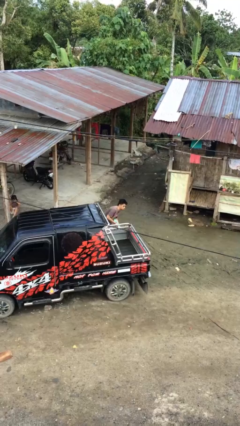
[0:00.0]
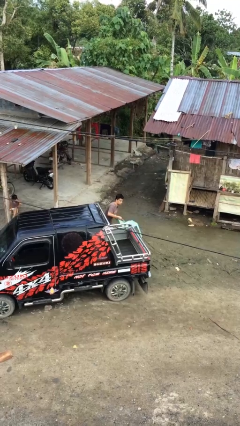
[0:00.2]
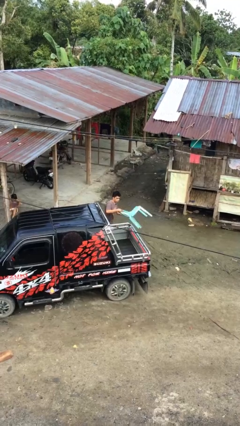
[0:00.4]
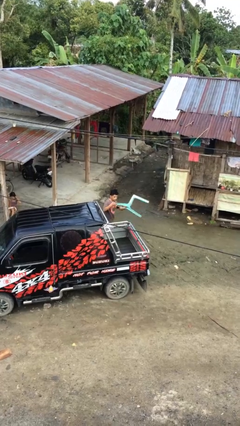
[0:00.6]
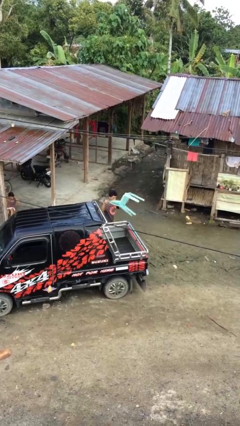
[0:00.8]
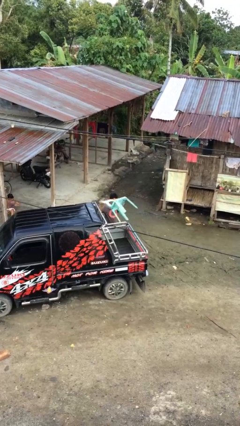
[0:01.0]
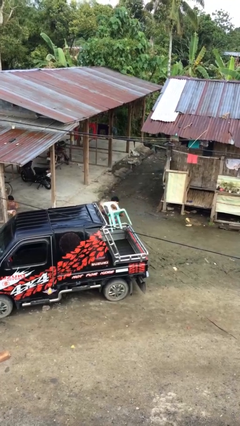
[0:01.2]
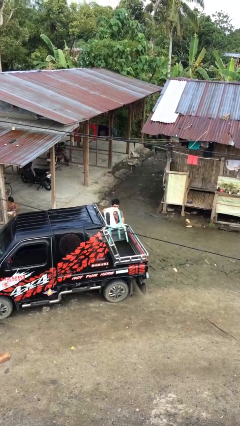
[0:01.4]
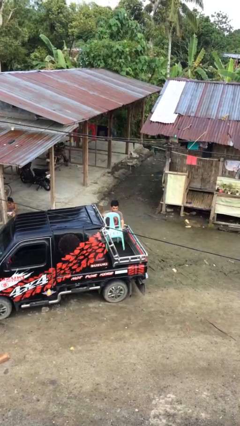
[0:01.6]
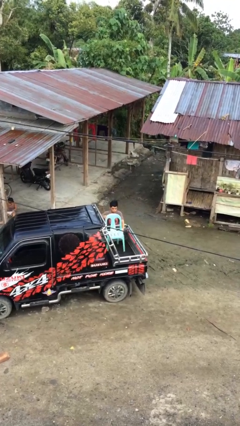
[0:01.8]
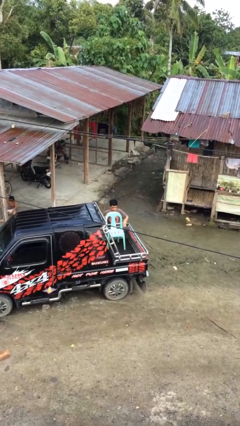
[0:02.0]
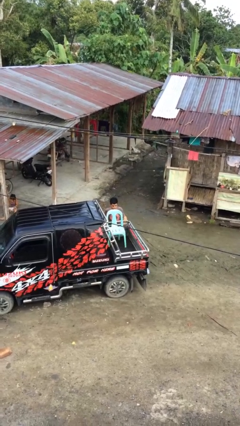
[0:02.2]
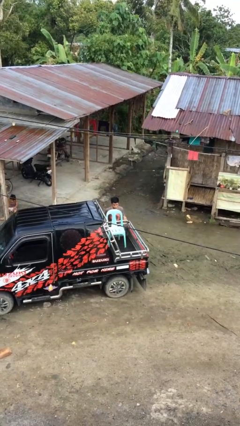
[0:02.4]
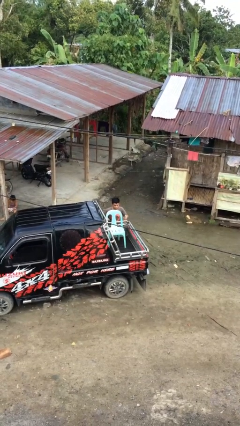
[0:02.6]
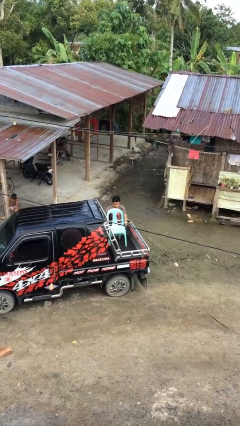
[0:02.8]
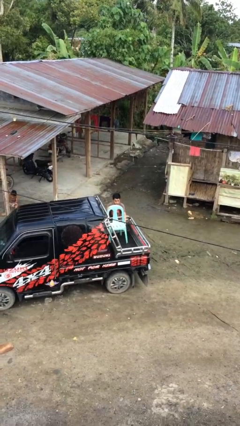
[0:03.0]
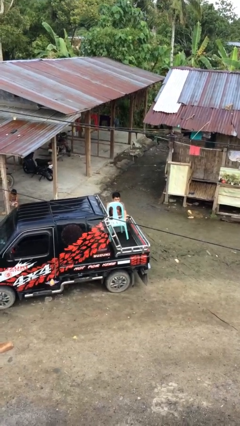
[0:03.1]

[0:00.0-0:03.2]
person loads car

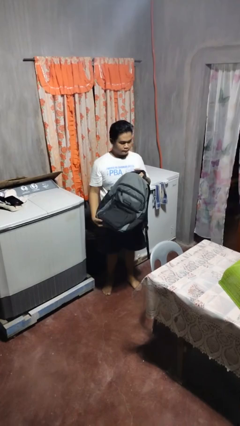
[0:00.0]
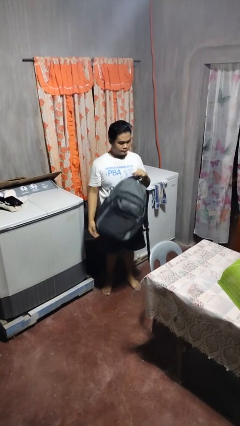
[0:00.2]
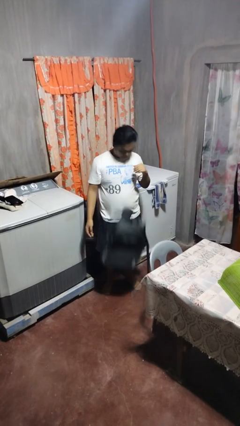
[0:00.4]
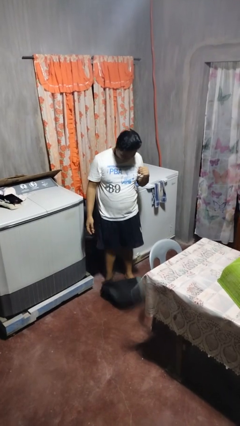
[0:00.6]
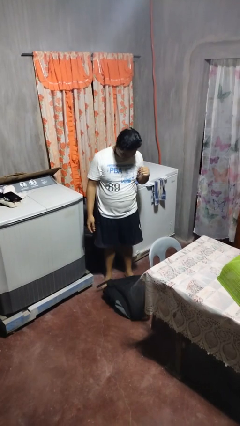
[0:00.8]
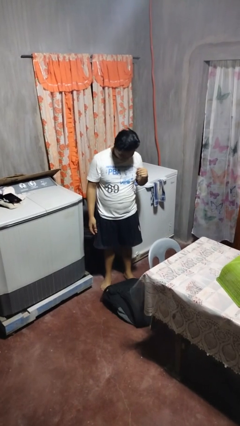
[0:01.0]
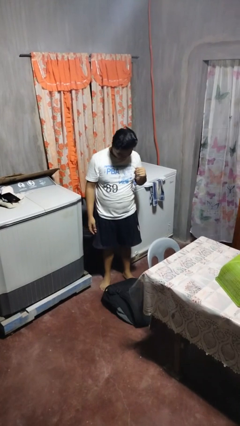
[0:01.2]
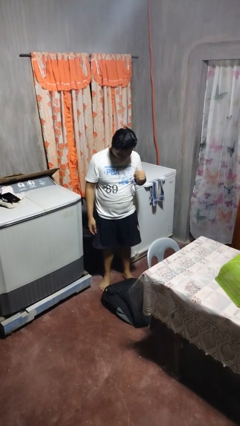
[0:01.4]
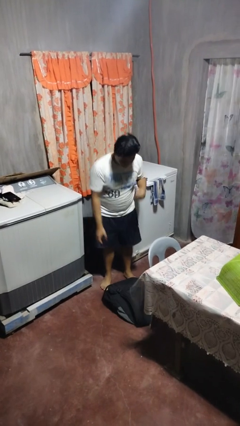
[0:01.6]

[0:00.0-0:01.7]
person drops object

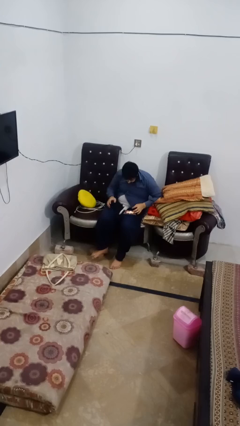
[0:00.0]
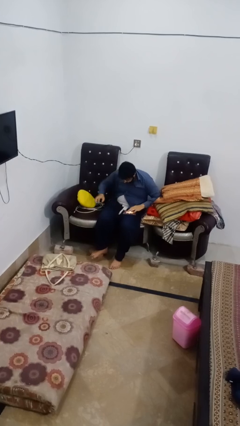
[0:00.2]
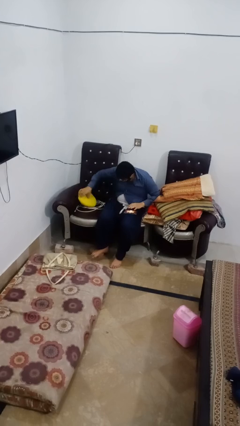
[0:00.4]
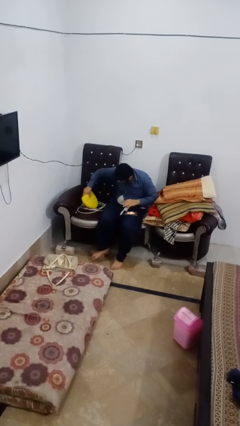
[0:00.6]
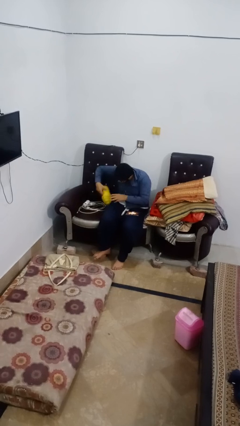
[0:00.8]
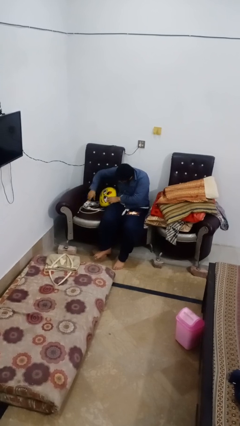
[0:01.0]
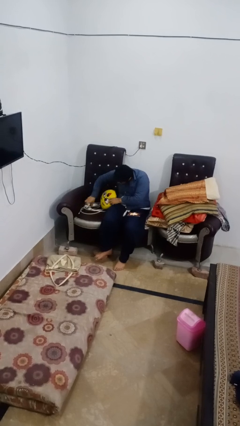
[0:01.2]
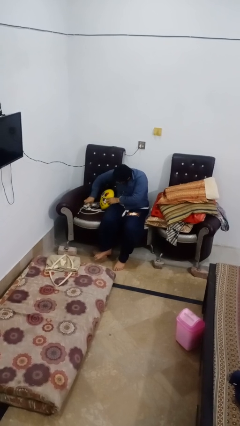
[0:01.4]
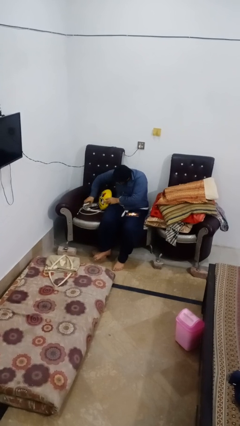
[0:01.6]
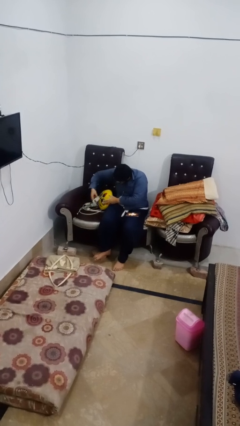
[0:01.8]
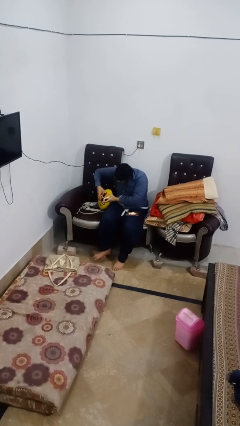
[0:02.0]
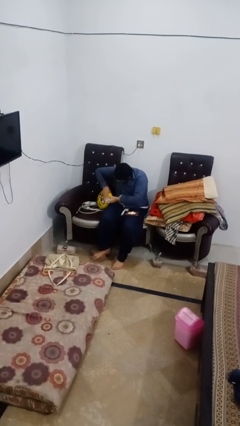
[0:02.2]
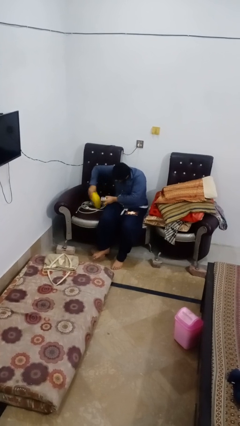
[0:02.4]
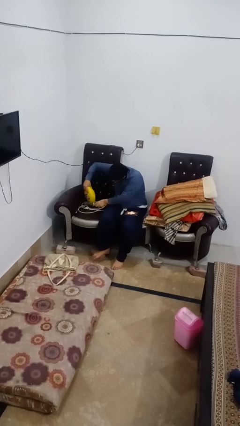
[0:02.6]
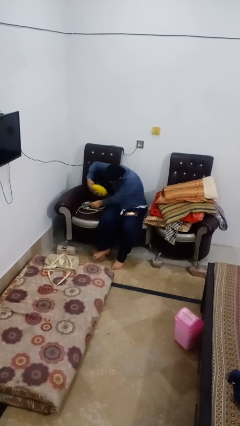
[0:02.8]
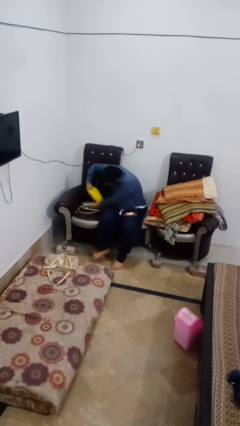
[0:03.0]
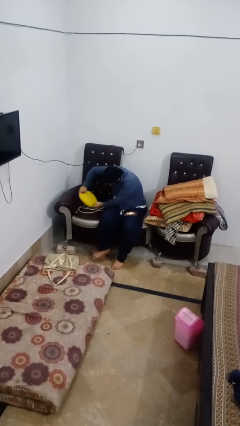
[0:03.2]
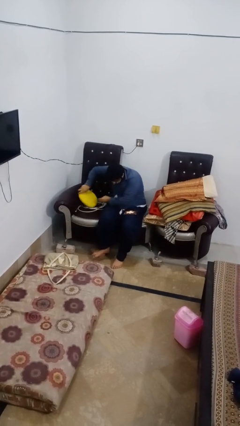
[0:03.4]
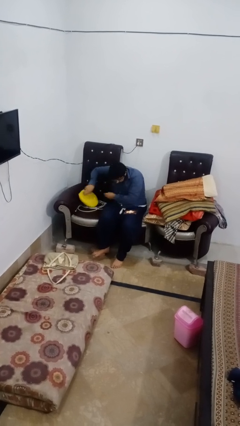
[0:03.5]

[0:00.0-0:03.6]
person searches in couch

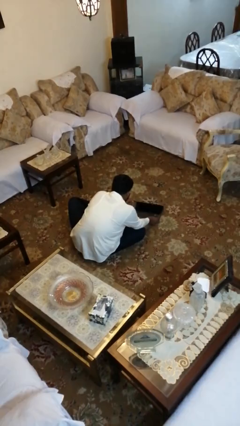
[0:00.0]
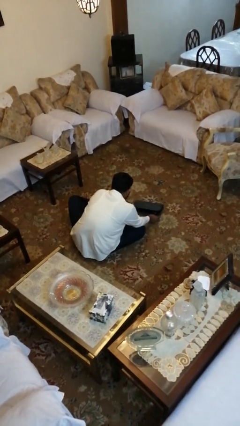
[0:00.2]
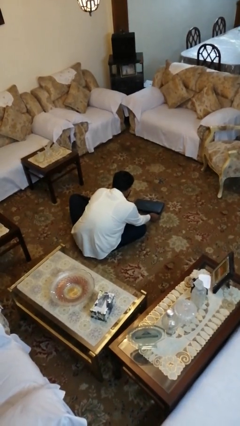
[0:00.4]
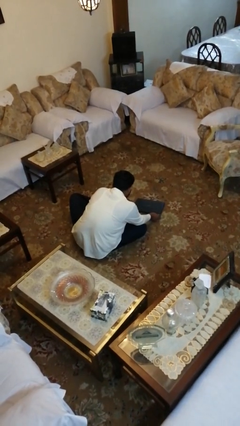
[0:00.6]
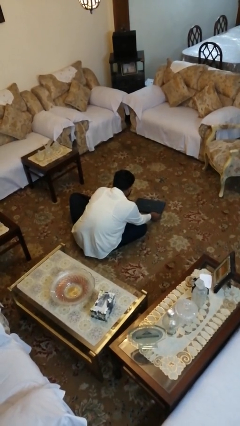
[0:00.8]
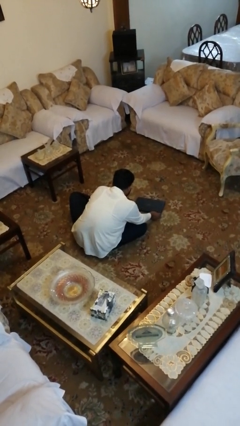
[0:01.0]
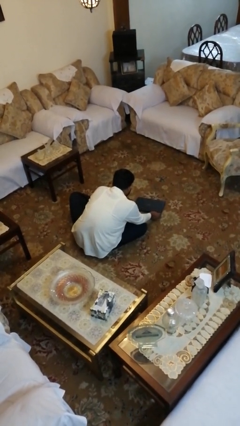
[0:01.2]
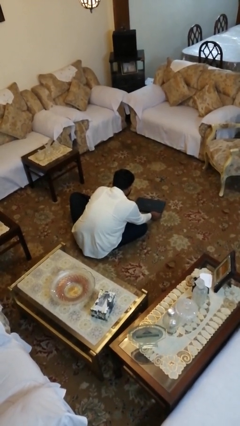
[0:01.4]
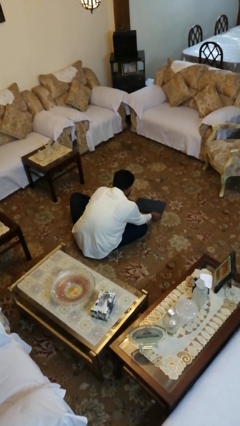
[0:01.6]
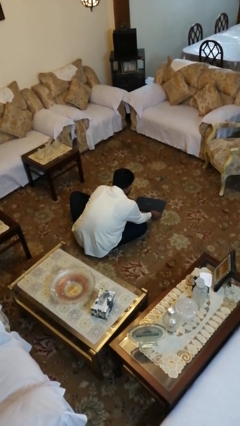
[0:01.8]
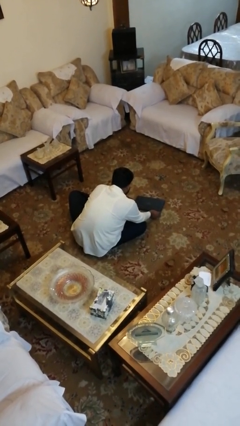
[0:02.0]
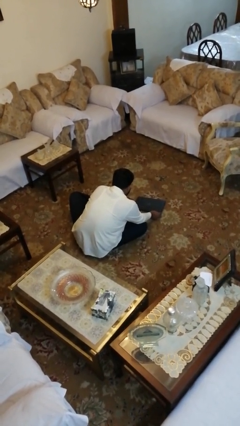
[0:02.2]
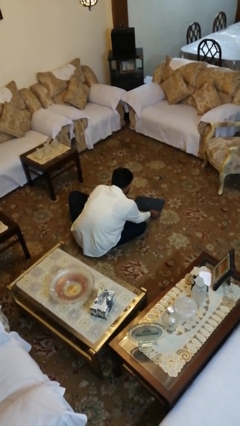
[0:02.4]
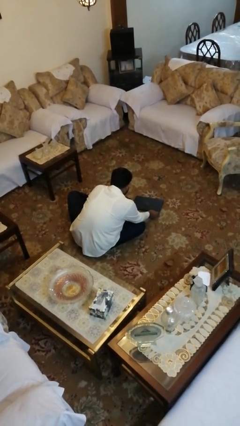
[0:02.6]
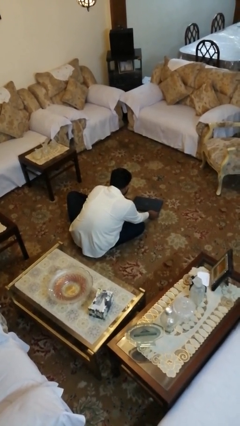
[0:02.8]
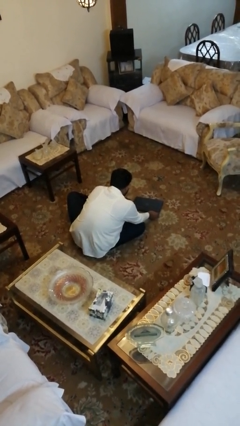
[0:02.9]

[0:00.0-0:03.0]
person closes laptop

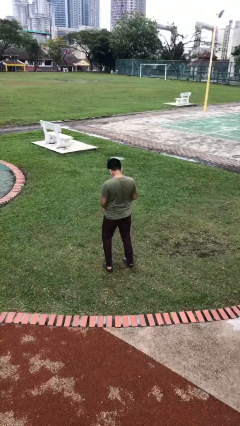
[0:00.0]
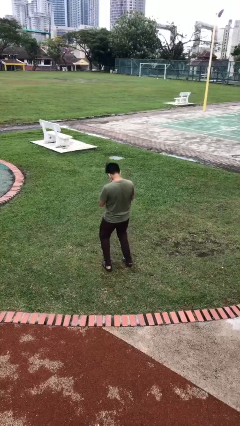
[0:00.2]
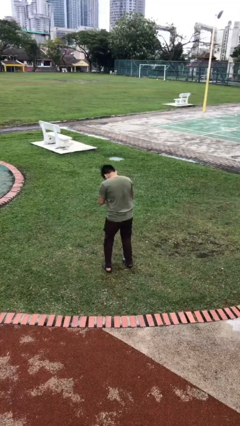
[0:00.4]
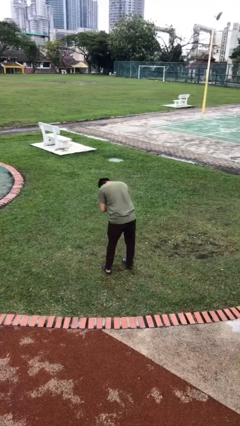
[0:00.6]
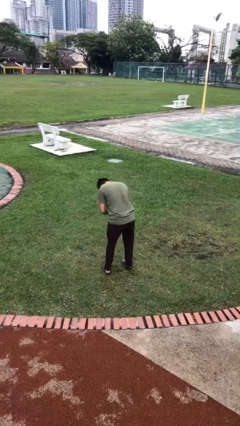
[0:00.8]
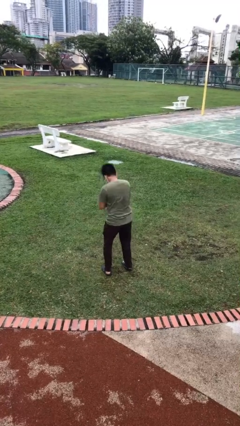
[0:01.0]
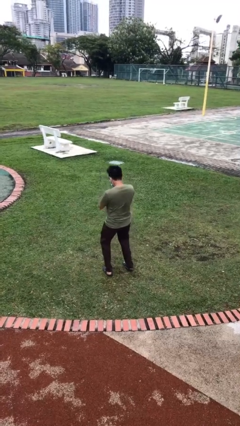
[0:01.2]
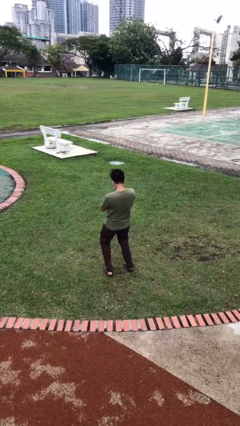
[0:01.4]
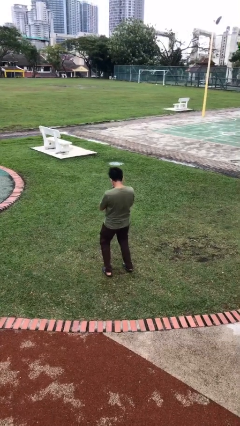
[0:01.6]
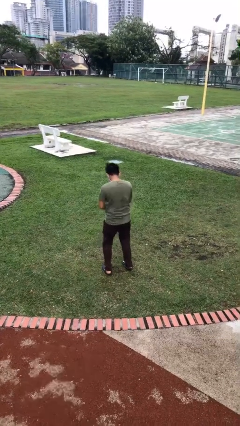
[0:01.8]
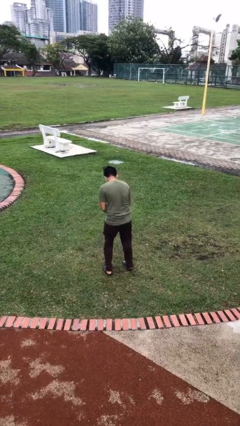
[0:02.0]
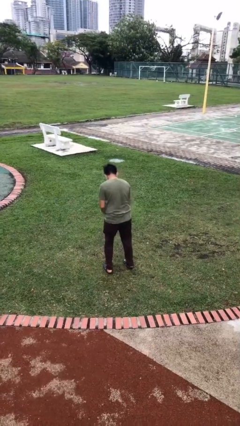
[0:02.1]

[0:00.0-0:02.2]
person dances in place

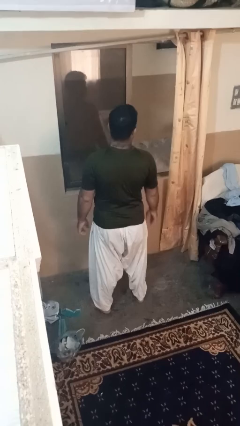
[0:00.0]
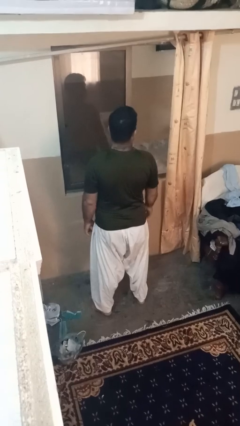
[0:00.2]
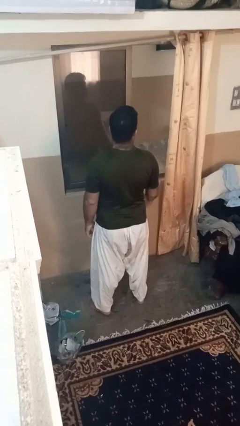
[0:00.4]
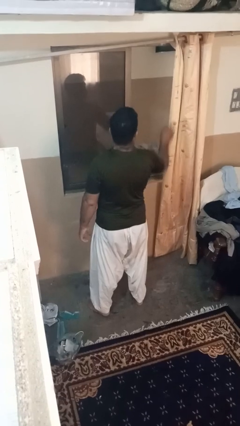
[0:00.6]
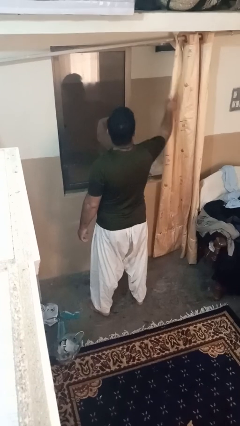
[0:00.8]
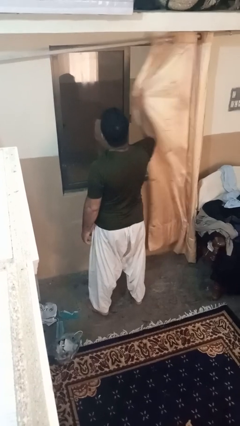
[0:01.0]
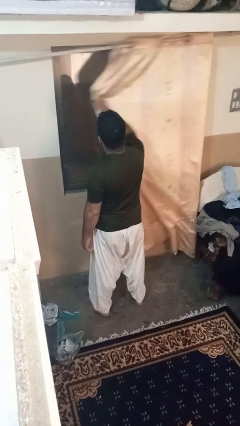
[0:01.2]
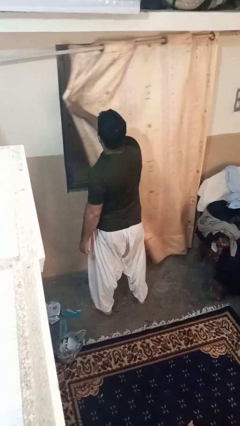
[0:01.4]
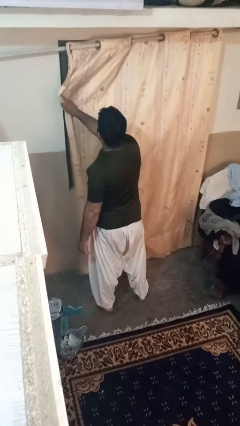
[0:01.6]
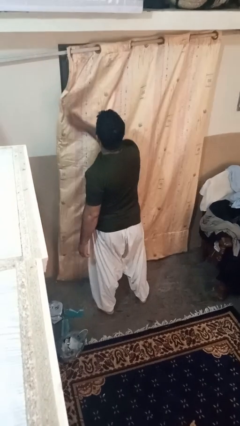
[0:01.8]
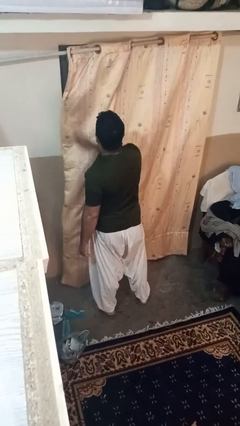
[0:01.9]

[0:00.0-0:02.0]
person closes curtains

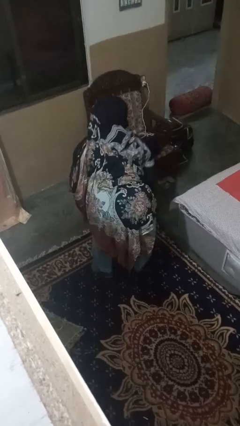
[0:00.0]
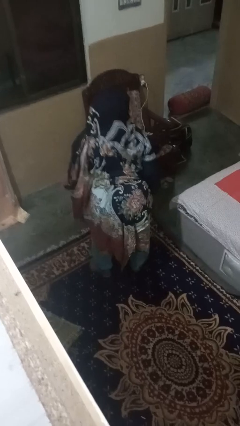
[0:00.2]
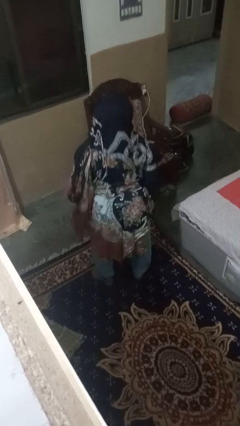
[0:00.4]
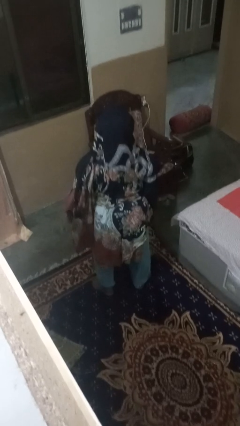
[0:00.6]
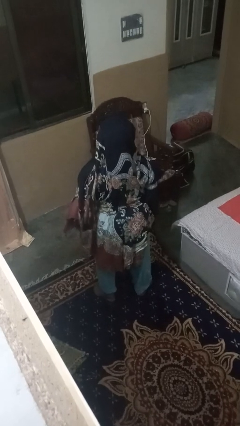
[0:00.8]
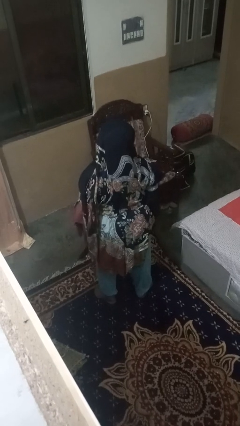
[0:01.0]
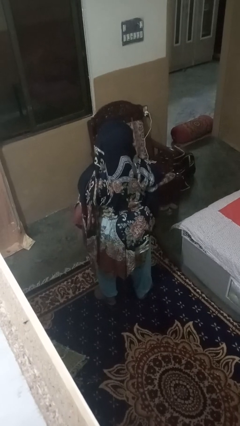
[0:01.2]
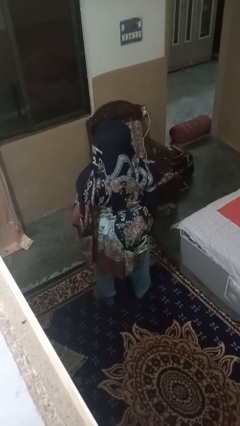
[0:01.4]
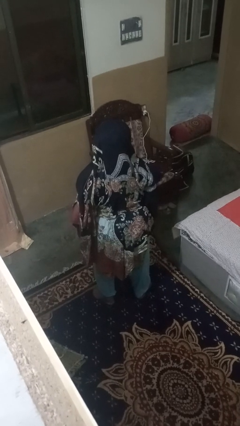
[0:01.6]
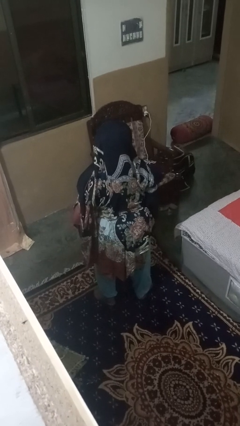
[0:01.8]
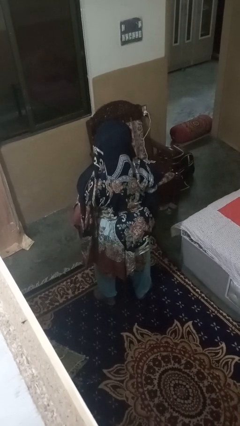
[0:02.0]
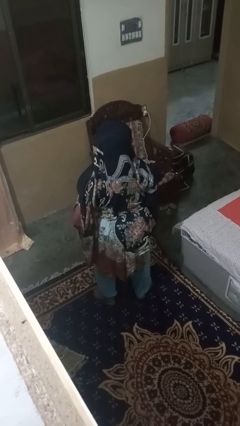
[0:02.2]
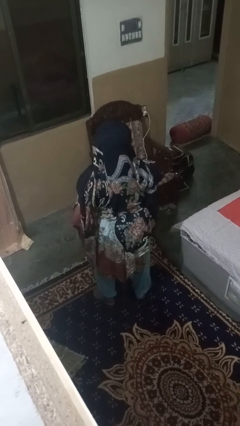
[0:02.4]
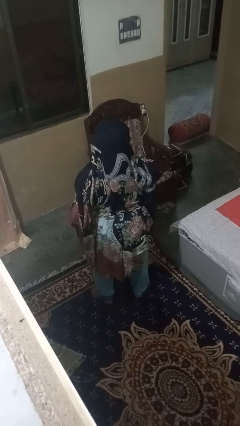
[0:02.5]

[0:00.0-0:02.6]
person stands up
